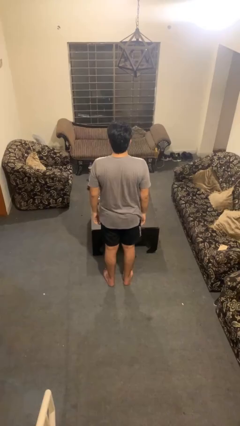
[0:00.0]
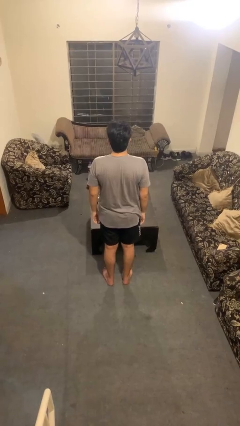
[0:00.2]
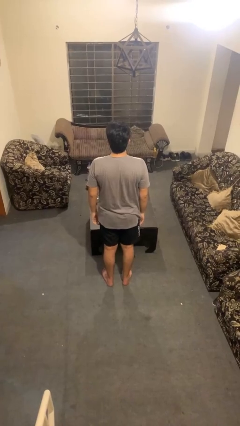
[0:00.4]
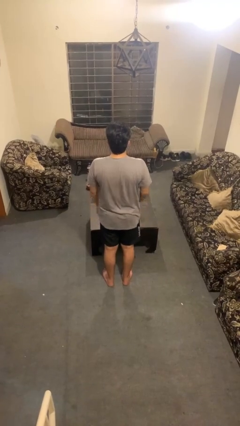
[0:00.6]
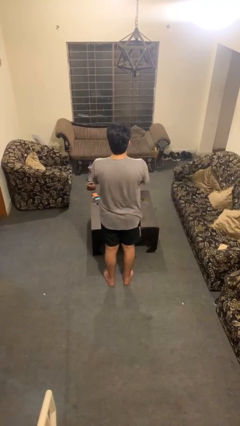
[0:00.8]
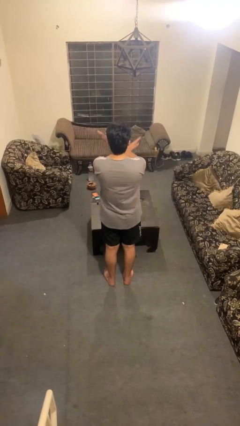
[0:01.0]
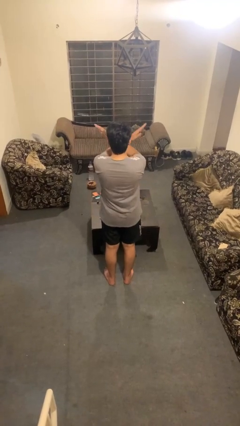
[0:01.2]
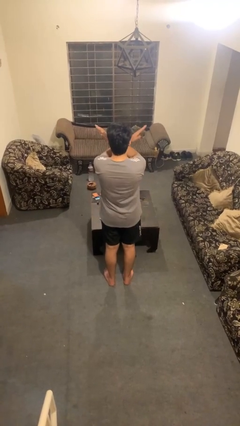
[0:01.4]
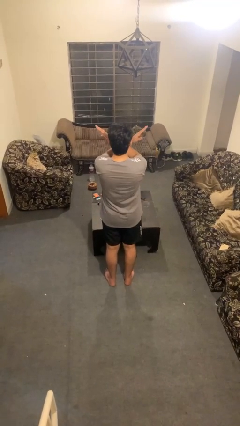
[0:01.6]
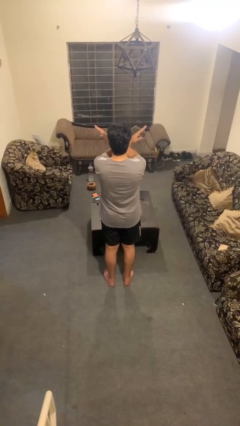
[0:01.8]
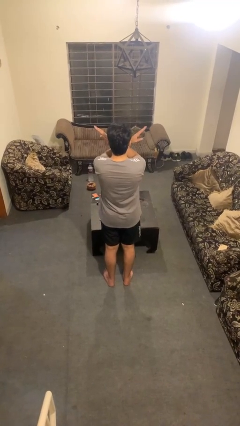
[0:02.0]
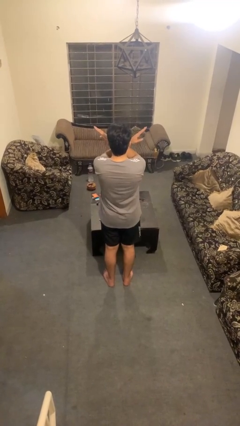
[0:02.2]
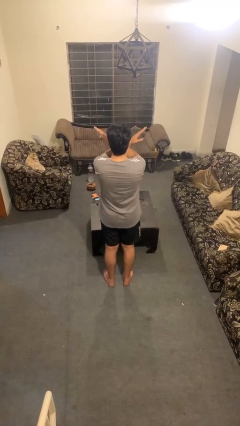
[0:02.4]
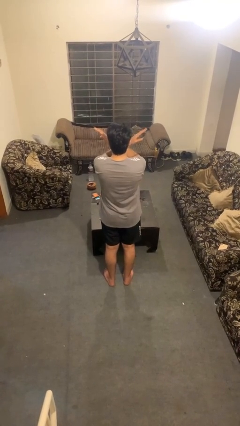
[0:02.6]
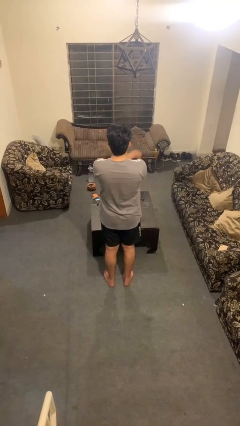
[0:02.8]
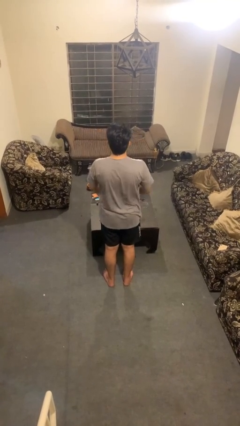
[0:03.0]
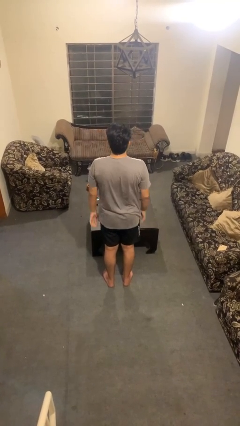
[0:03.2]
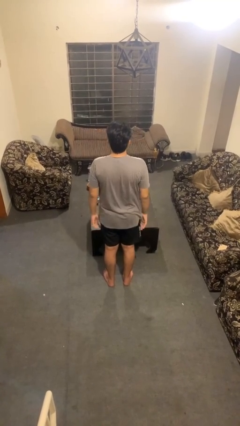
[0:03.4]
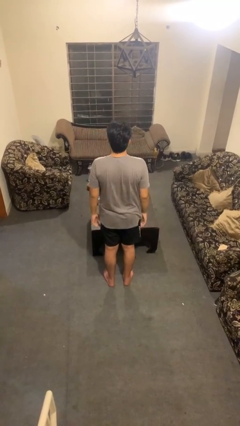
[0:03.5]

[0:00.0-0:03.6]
person gestures arms x

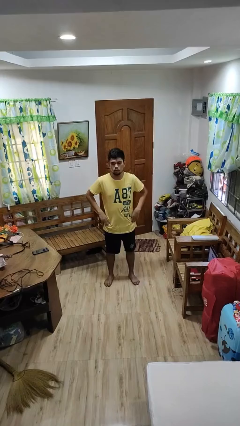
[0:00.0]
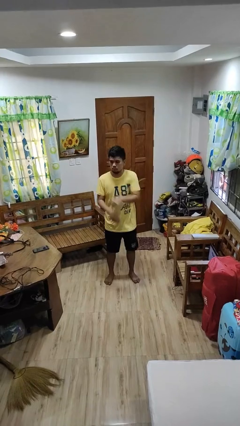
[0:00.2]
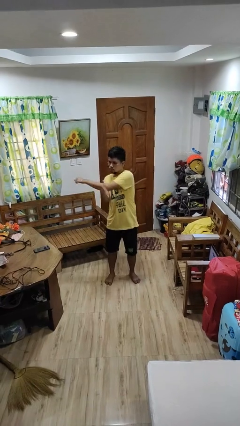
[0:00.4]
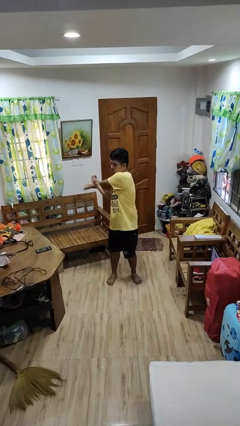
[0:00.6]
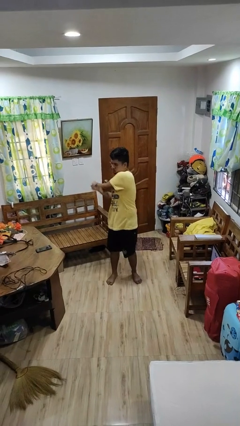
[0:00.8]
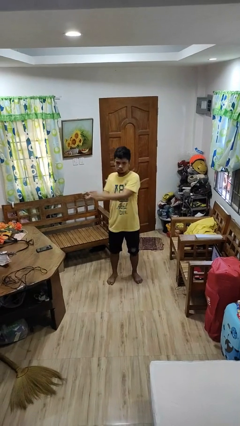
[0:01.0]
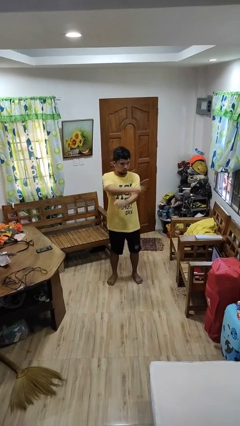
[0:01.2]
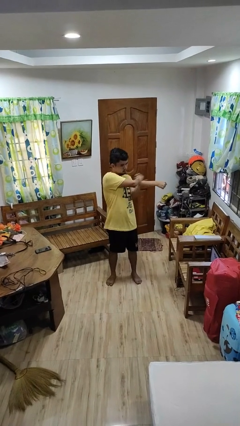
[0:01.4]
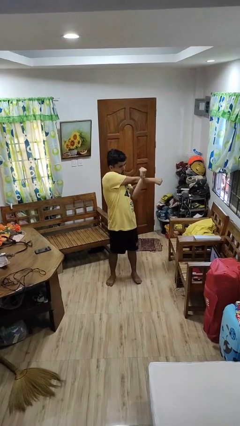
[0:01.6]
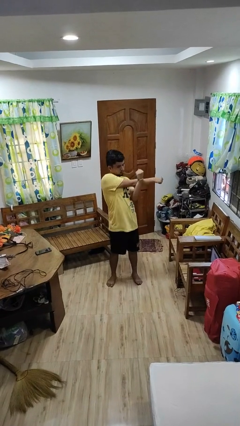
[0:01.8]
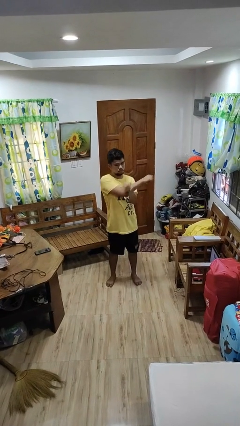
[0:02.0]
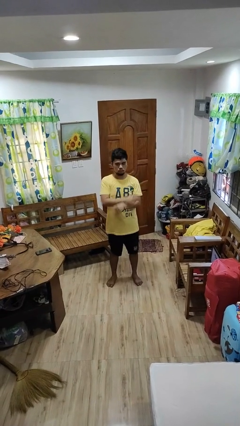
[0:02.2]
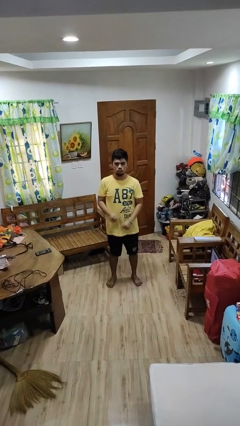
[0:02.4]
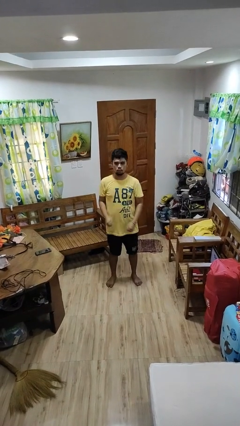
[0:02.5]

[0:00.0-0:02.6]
person stretches arms to side

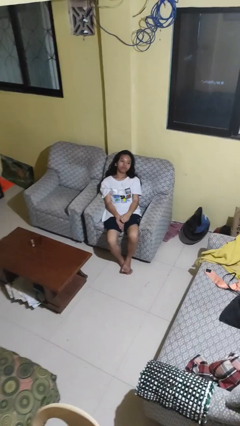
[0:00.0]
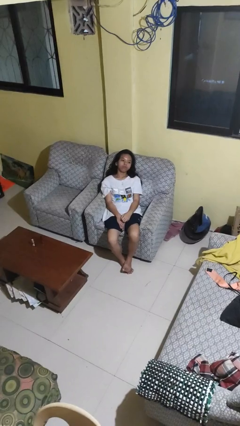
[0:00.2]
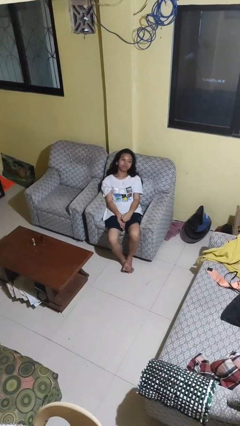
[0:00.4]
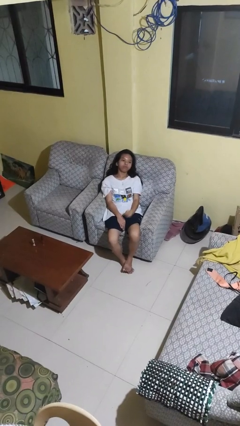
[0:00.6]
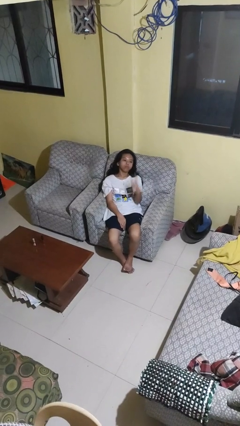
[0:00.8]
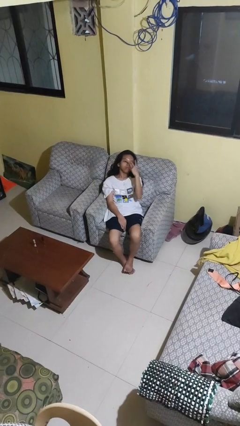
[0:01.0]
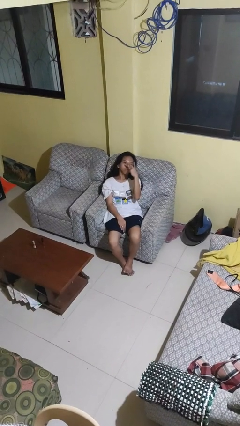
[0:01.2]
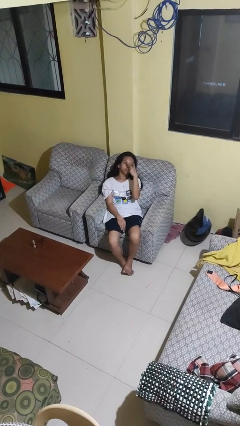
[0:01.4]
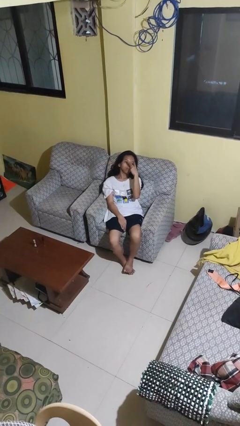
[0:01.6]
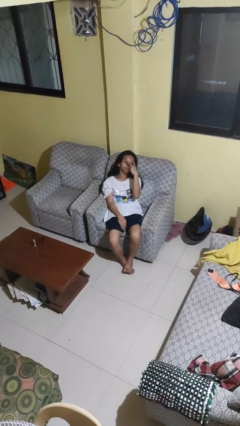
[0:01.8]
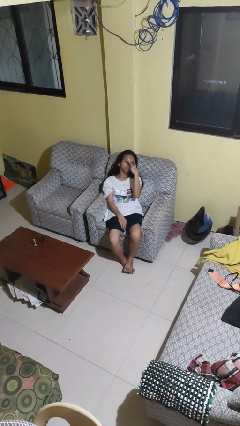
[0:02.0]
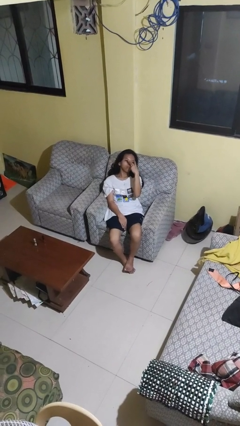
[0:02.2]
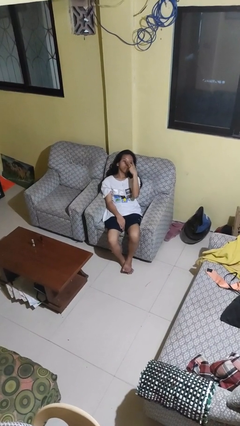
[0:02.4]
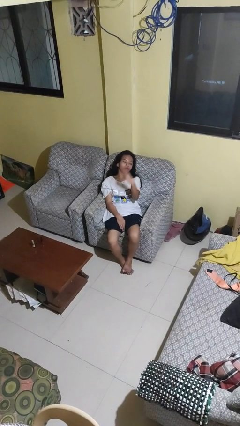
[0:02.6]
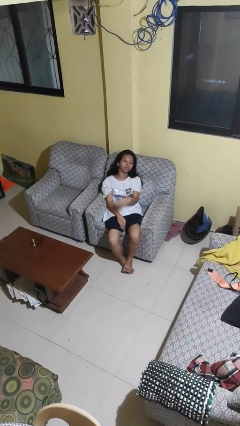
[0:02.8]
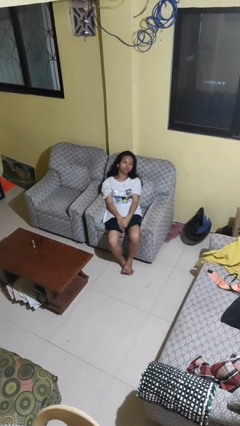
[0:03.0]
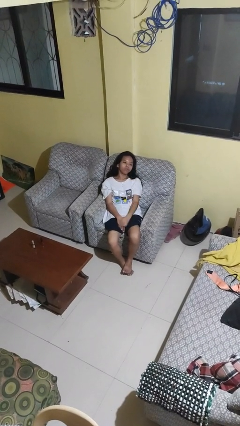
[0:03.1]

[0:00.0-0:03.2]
person gestures watch closely

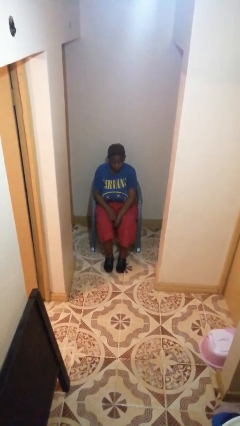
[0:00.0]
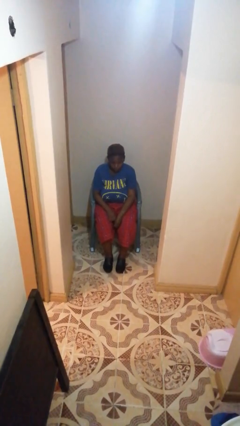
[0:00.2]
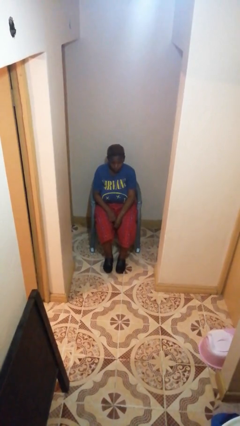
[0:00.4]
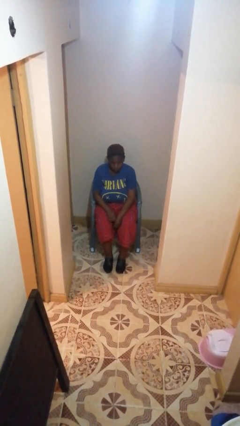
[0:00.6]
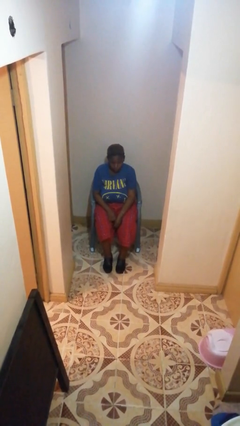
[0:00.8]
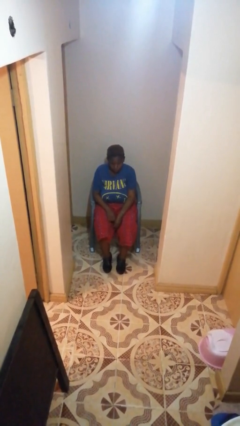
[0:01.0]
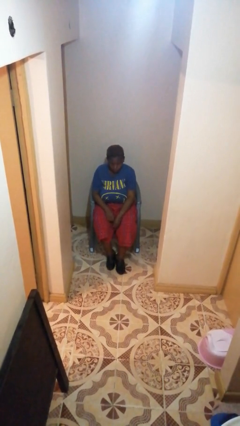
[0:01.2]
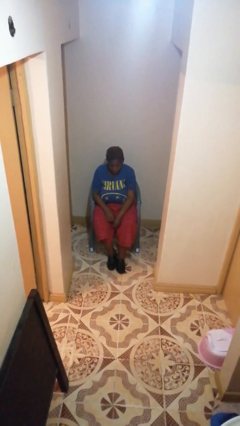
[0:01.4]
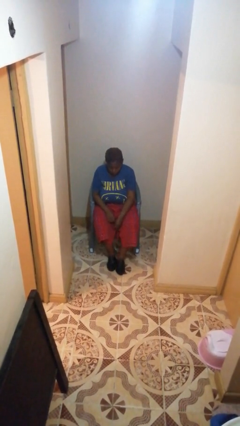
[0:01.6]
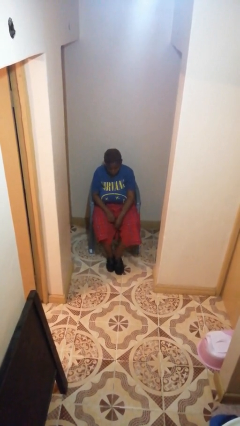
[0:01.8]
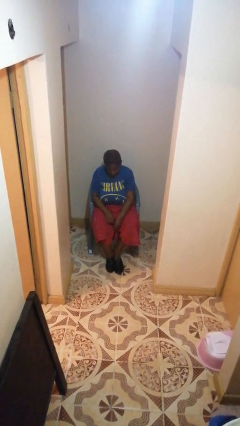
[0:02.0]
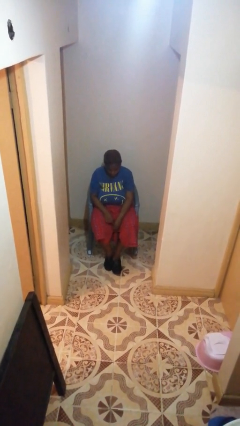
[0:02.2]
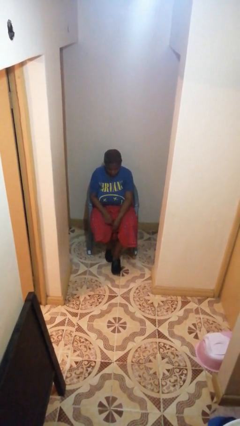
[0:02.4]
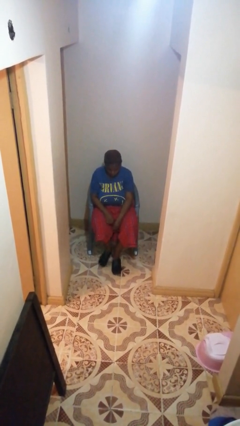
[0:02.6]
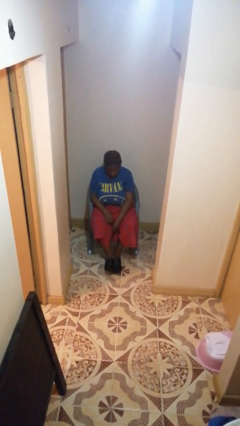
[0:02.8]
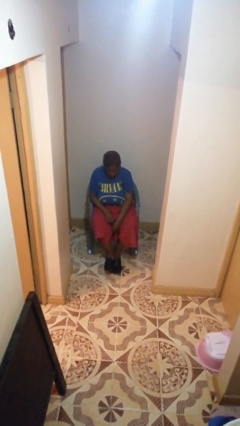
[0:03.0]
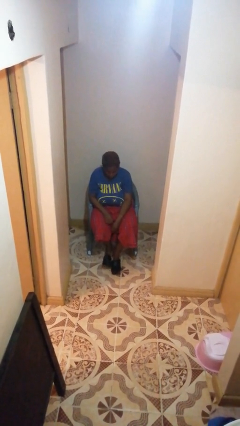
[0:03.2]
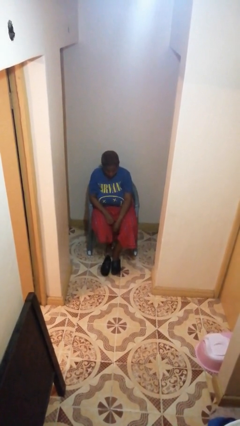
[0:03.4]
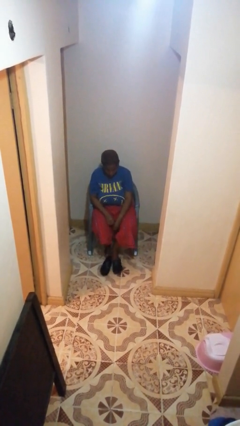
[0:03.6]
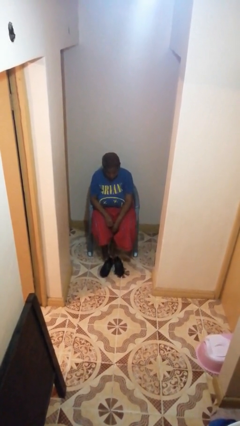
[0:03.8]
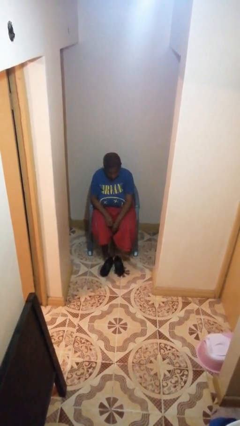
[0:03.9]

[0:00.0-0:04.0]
person takes off shoes

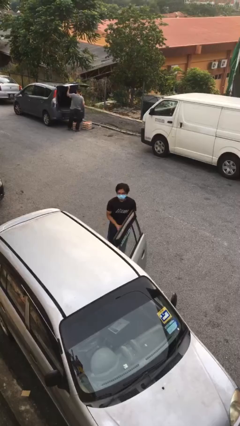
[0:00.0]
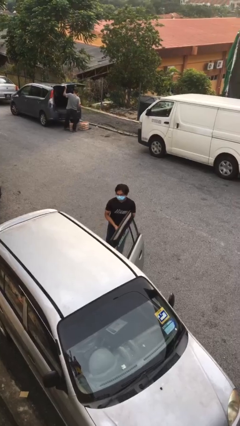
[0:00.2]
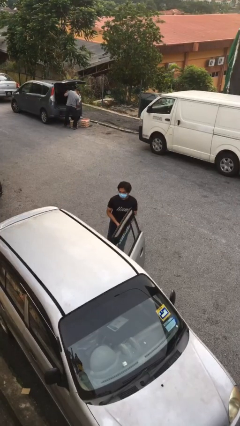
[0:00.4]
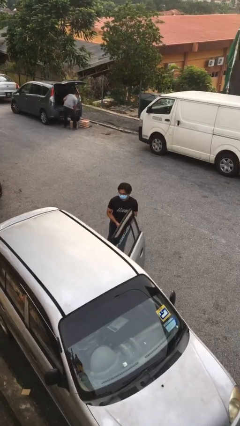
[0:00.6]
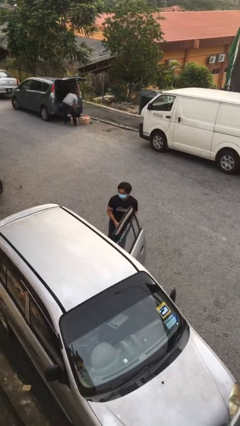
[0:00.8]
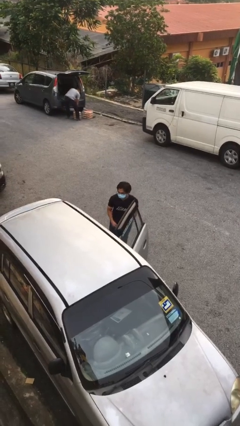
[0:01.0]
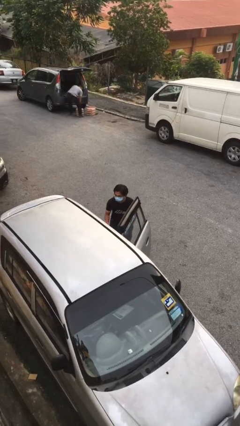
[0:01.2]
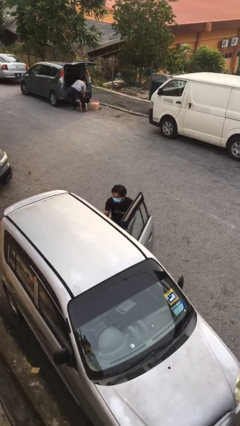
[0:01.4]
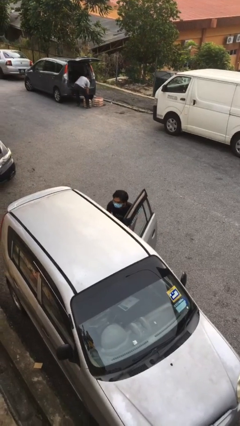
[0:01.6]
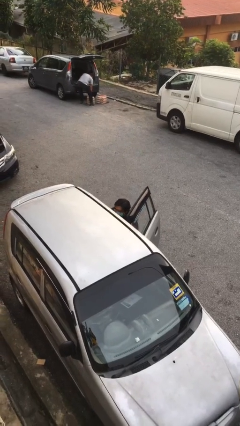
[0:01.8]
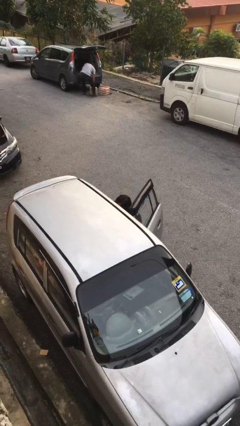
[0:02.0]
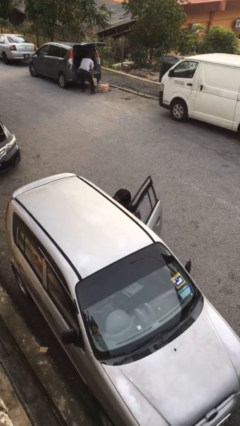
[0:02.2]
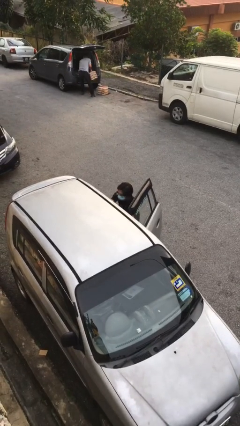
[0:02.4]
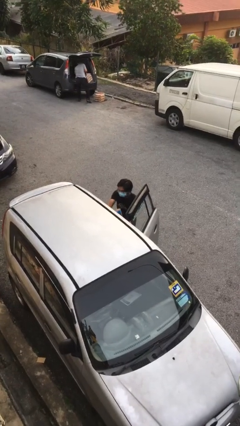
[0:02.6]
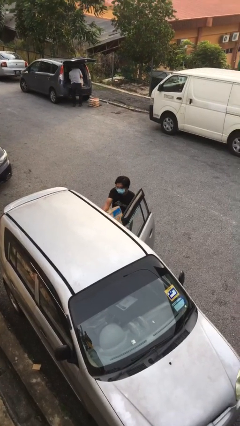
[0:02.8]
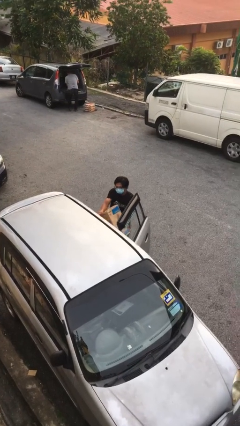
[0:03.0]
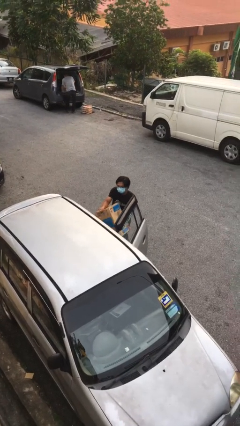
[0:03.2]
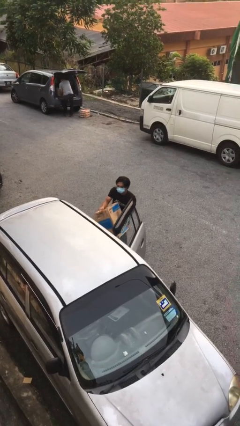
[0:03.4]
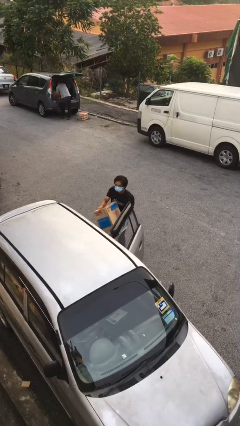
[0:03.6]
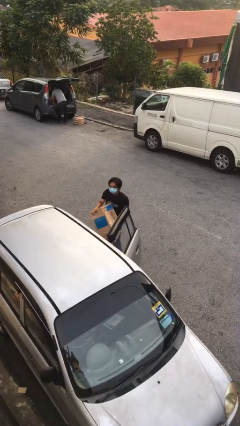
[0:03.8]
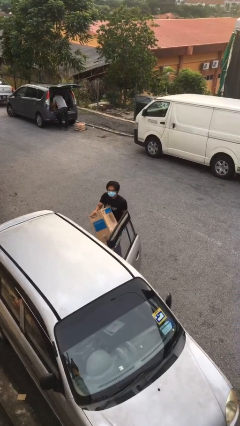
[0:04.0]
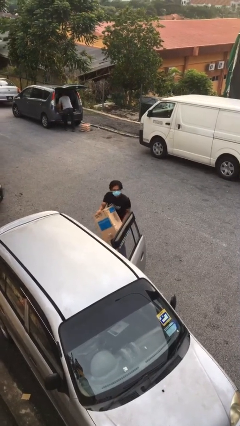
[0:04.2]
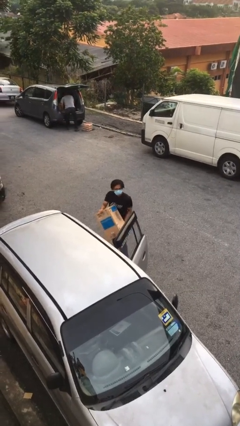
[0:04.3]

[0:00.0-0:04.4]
person unloads car
